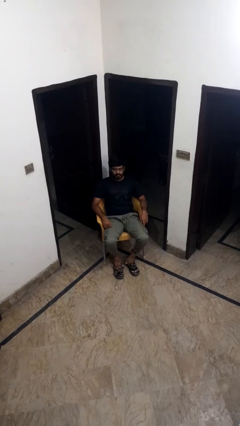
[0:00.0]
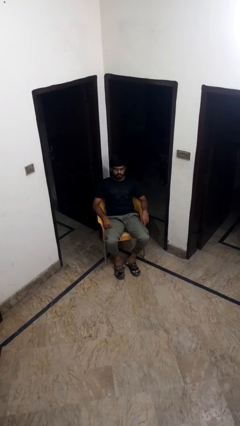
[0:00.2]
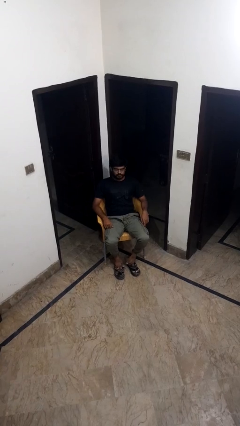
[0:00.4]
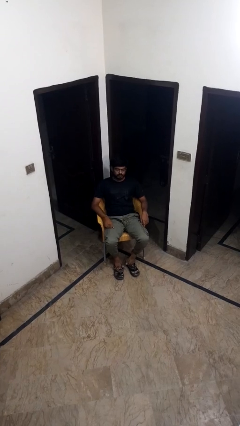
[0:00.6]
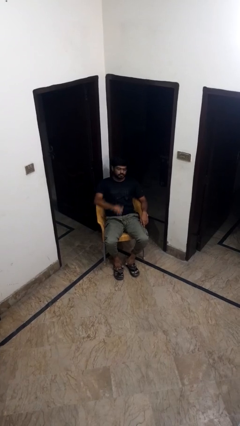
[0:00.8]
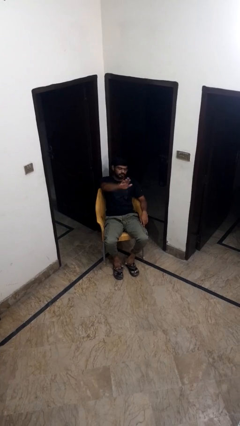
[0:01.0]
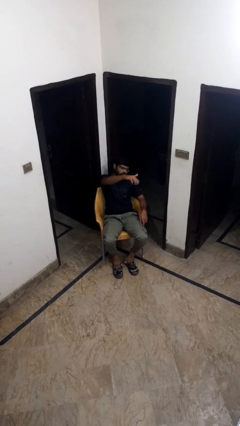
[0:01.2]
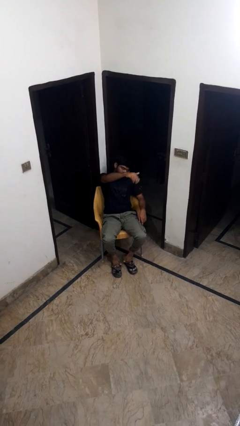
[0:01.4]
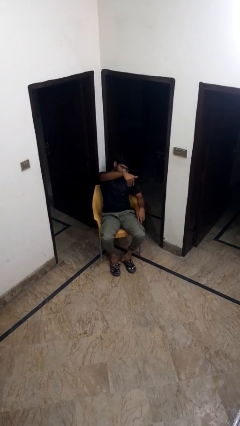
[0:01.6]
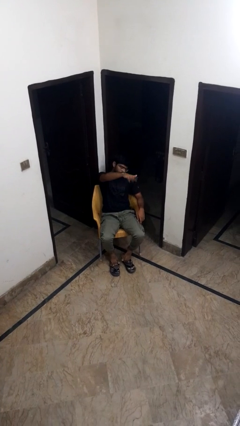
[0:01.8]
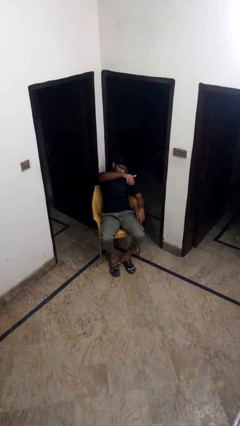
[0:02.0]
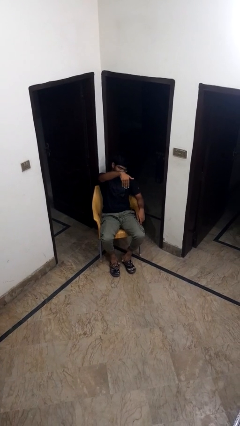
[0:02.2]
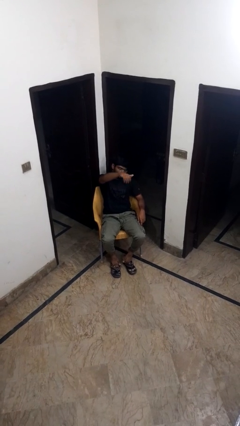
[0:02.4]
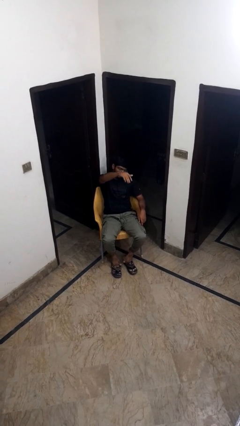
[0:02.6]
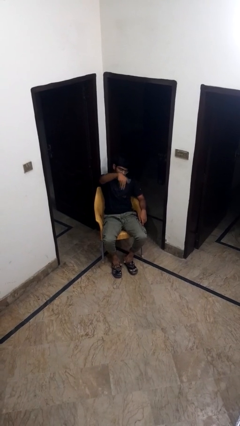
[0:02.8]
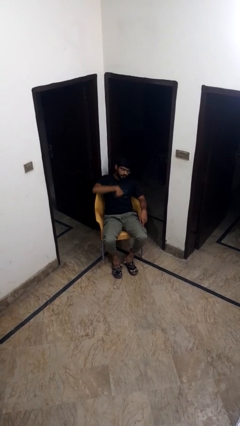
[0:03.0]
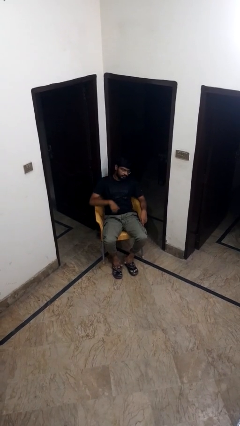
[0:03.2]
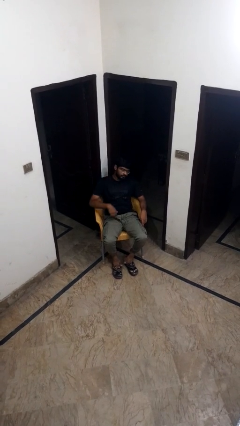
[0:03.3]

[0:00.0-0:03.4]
person gestures come here

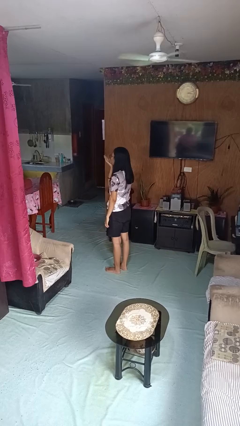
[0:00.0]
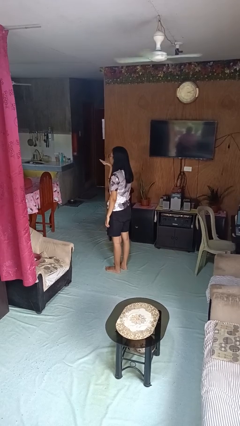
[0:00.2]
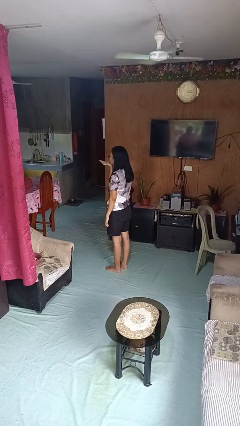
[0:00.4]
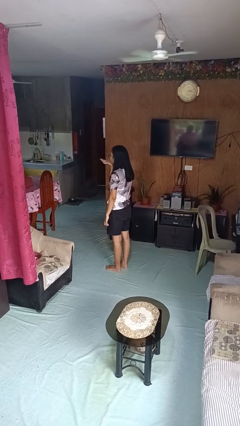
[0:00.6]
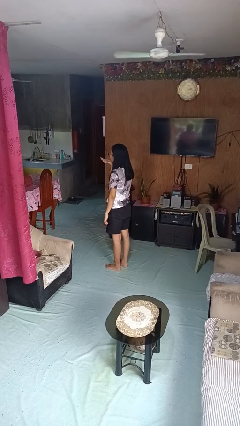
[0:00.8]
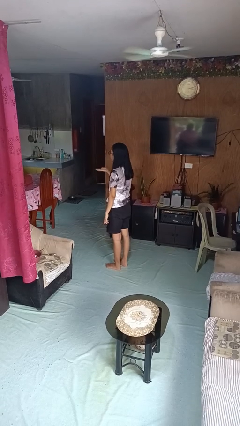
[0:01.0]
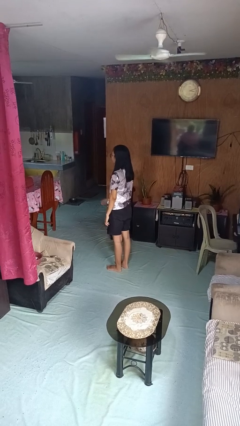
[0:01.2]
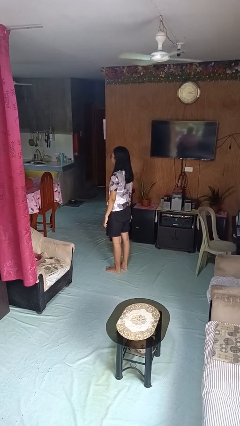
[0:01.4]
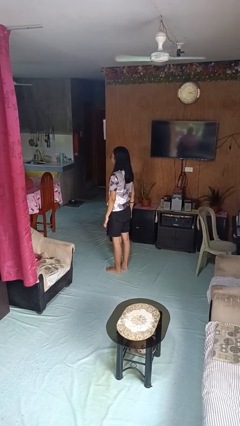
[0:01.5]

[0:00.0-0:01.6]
person gestures blow kiss

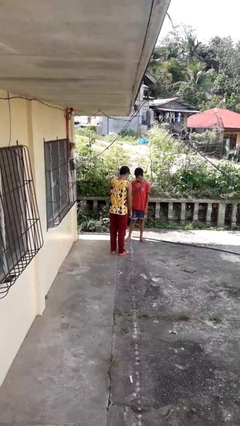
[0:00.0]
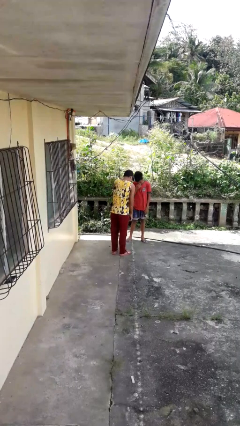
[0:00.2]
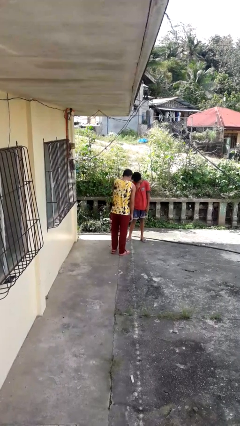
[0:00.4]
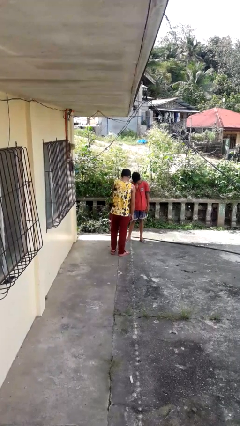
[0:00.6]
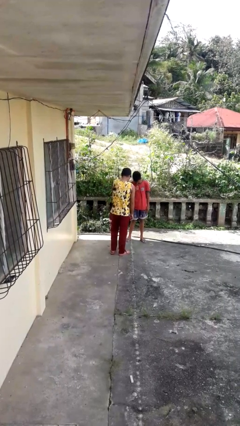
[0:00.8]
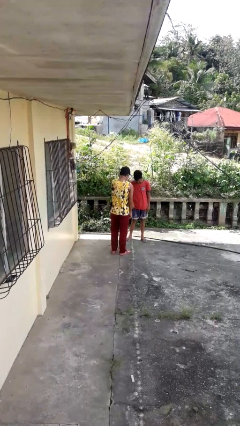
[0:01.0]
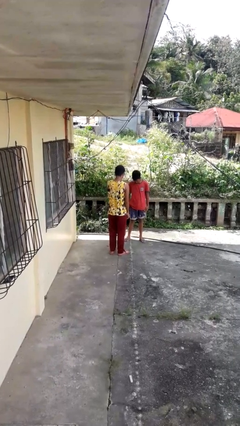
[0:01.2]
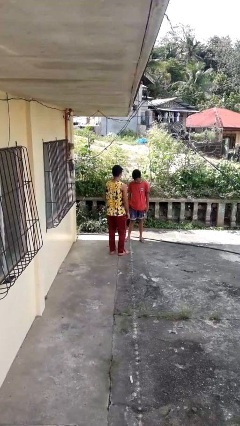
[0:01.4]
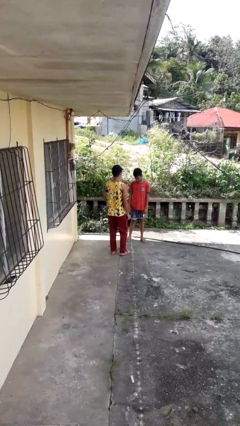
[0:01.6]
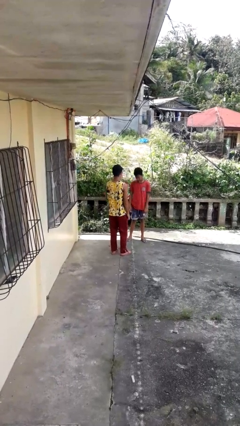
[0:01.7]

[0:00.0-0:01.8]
person laughs with person

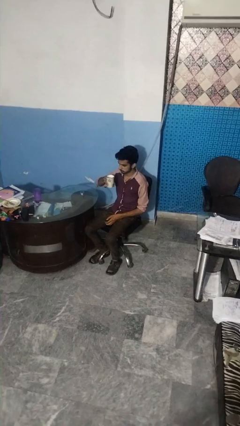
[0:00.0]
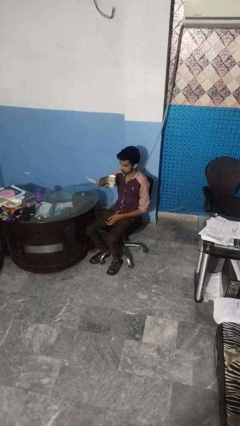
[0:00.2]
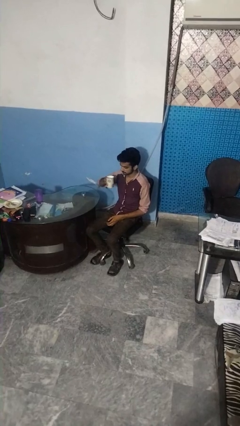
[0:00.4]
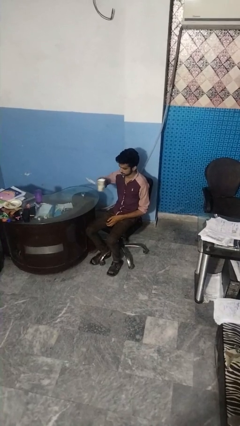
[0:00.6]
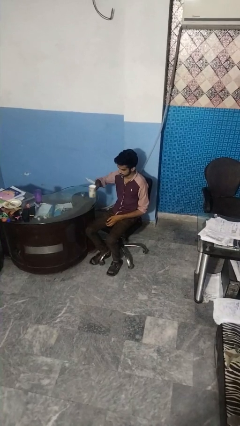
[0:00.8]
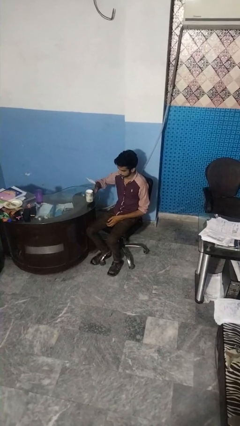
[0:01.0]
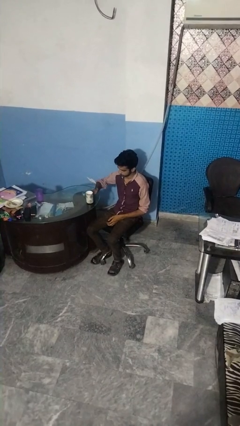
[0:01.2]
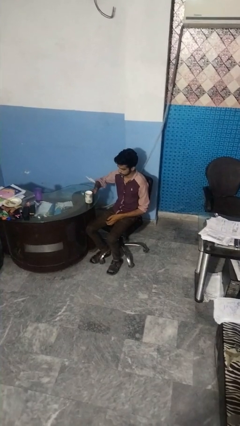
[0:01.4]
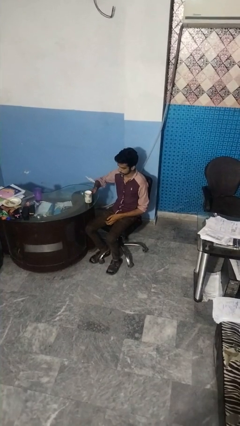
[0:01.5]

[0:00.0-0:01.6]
person puts down object on table

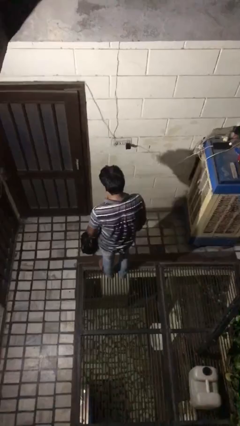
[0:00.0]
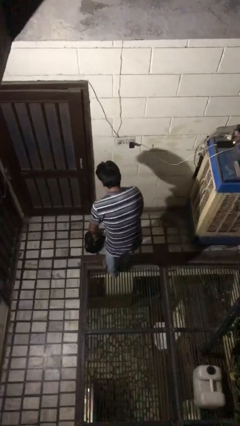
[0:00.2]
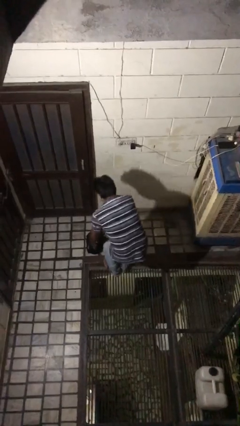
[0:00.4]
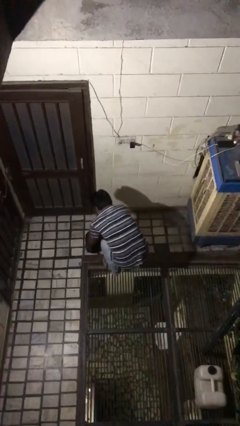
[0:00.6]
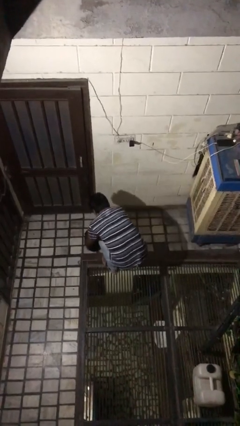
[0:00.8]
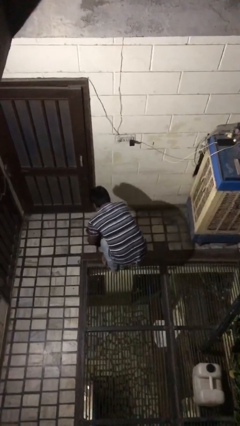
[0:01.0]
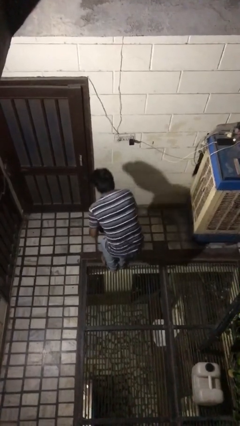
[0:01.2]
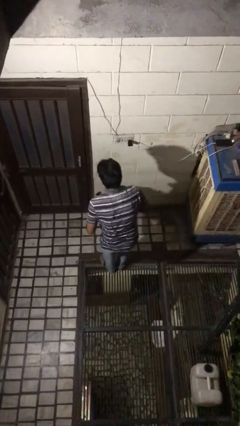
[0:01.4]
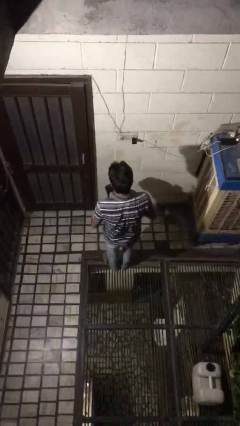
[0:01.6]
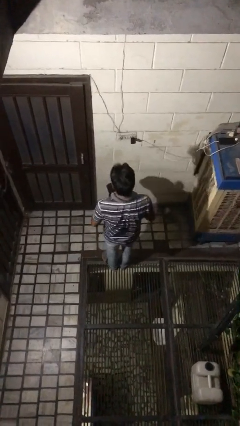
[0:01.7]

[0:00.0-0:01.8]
person picks up object from floor

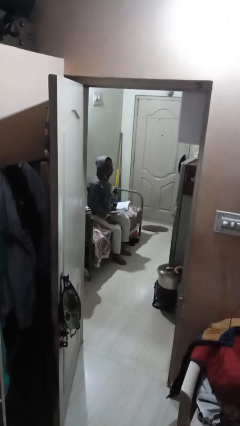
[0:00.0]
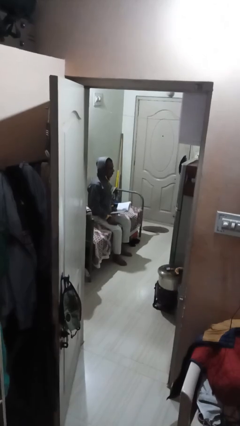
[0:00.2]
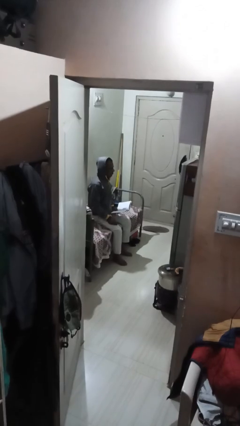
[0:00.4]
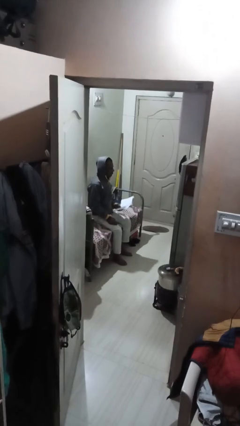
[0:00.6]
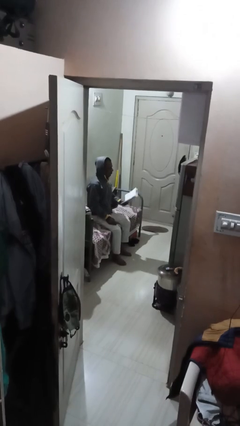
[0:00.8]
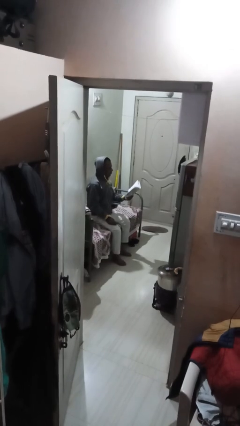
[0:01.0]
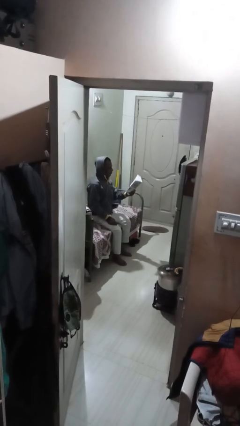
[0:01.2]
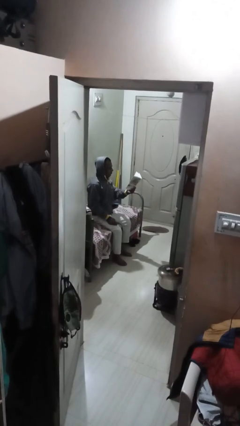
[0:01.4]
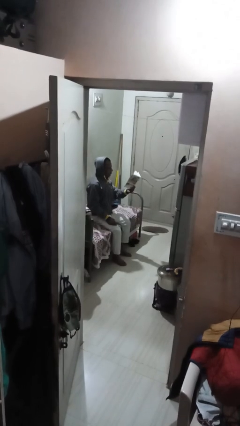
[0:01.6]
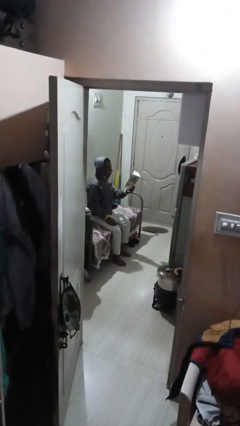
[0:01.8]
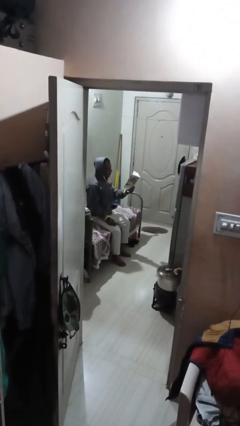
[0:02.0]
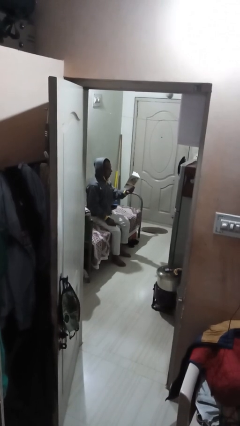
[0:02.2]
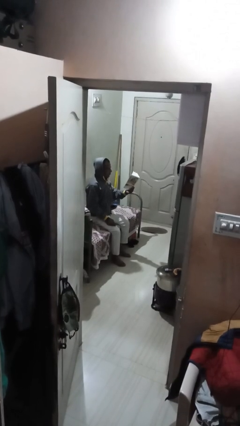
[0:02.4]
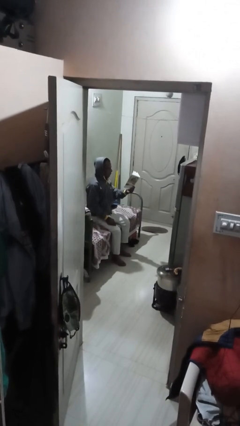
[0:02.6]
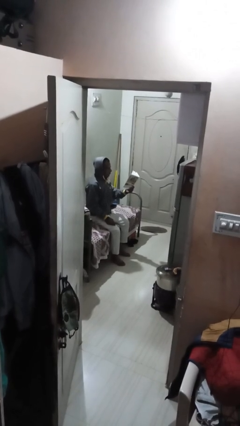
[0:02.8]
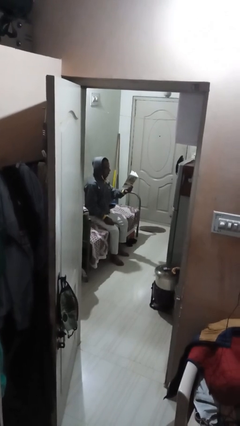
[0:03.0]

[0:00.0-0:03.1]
person reads document

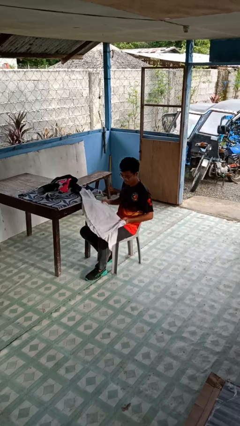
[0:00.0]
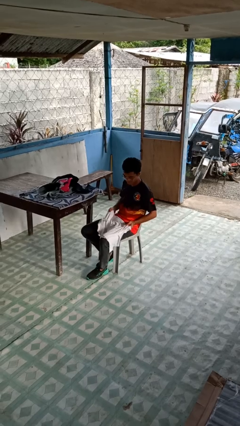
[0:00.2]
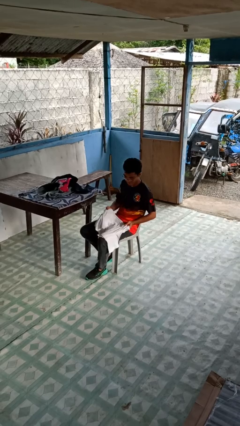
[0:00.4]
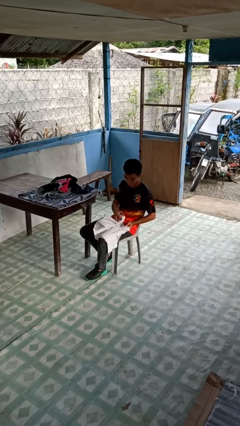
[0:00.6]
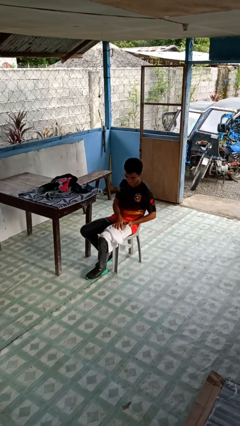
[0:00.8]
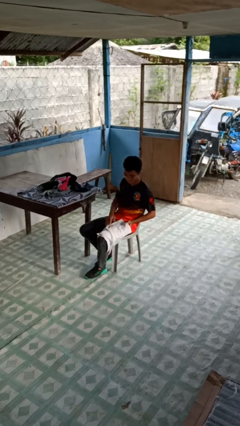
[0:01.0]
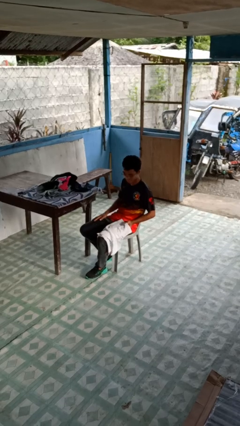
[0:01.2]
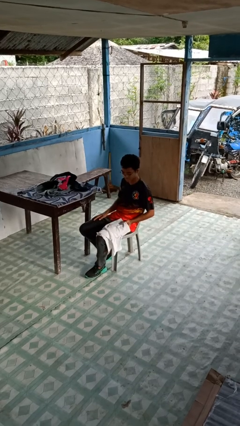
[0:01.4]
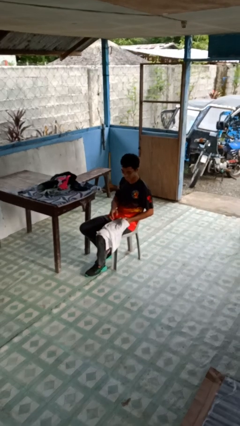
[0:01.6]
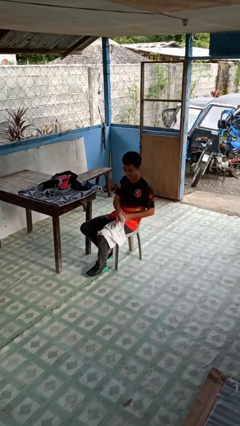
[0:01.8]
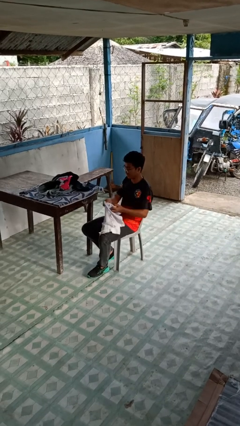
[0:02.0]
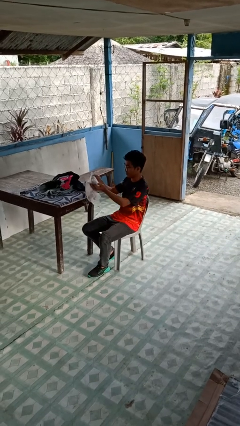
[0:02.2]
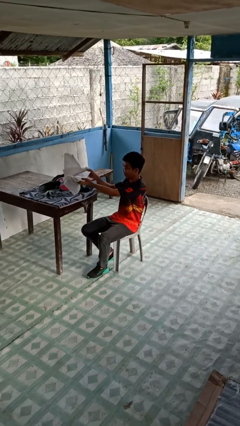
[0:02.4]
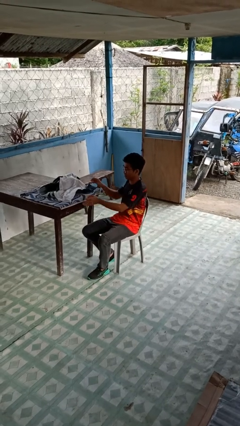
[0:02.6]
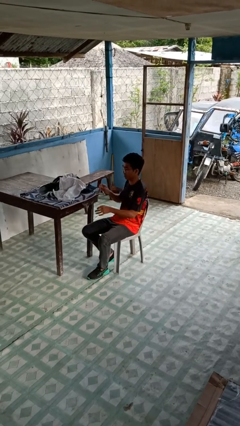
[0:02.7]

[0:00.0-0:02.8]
person folds shirt

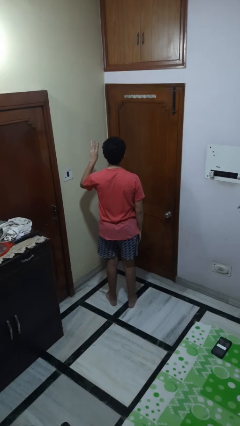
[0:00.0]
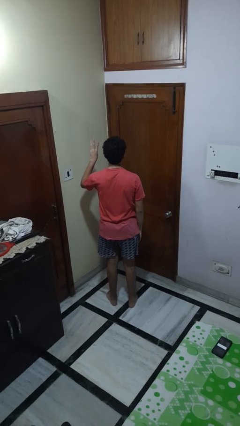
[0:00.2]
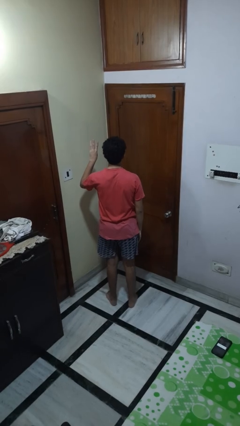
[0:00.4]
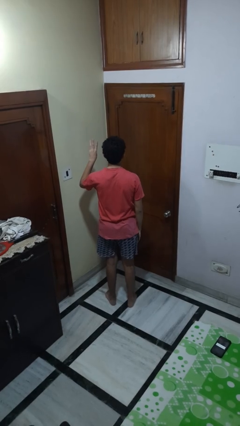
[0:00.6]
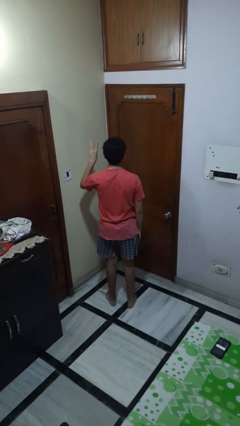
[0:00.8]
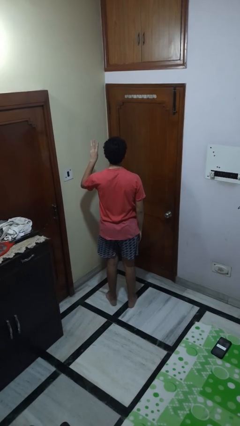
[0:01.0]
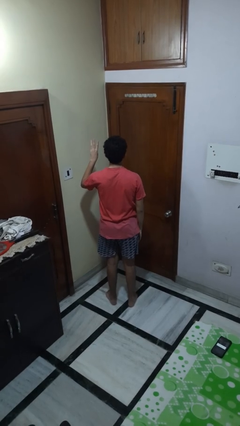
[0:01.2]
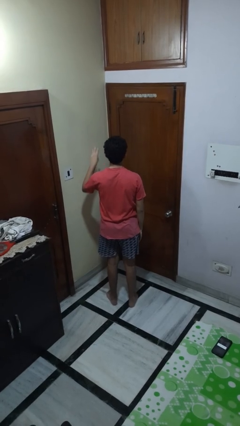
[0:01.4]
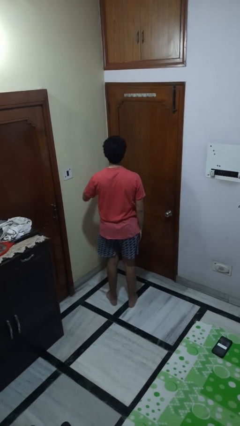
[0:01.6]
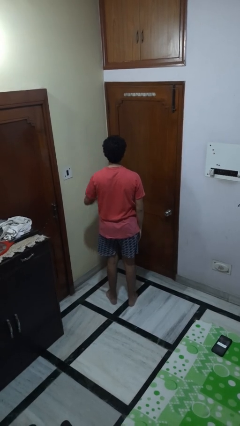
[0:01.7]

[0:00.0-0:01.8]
person gestures number three
